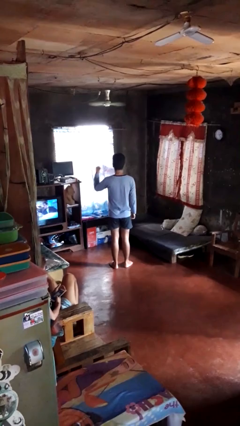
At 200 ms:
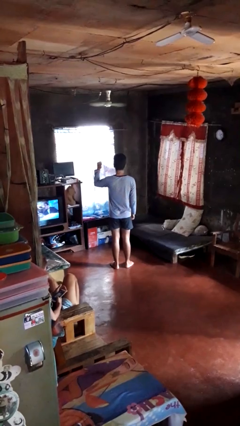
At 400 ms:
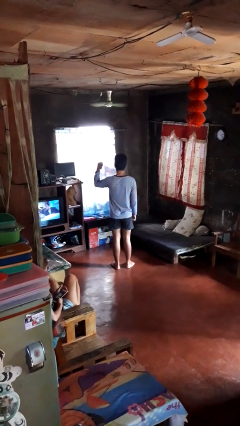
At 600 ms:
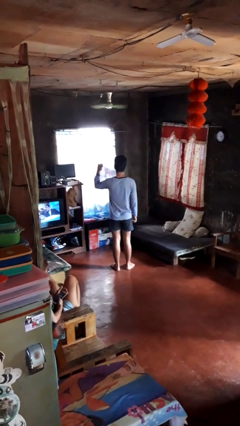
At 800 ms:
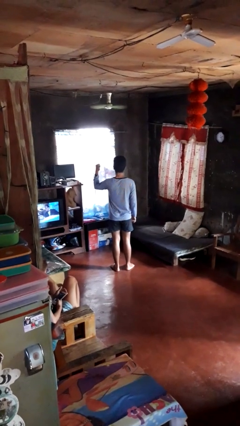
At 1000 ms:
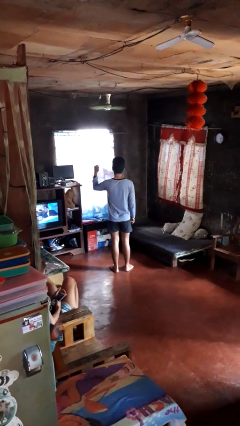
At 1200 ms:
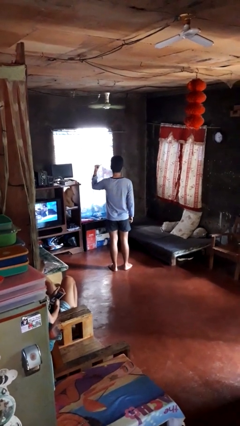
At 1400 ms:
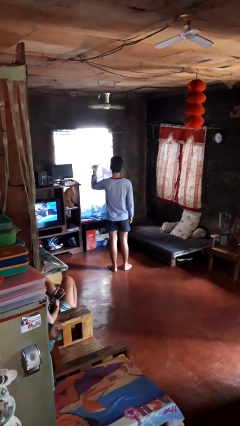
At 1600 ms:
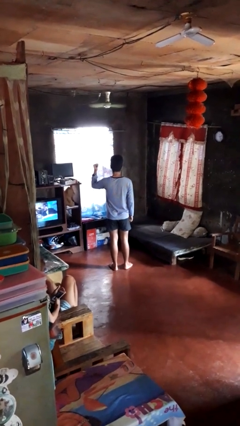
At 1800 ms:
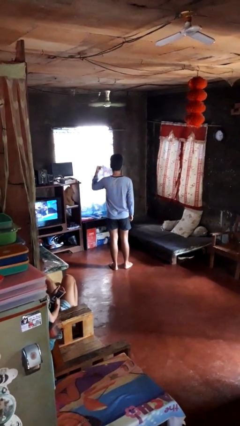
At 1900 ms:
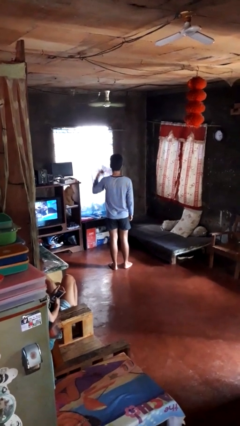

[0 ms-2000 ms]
person gestures hang loose

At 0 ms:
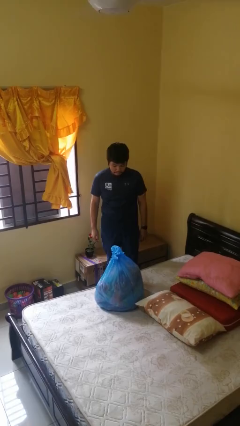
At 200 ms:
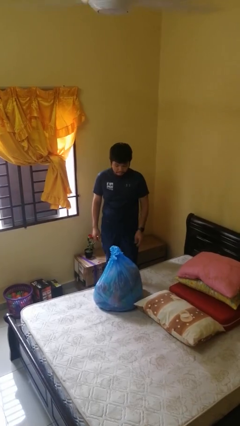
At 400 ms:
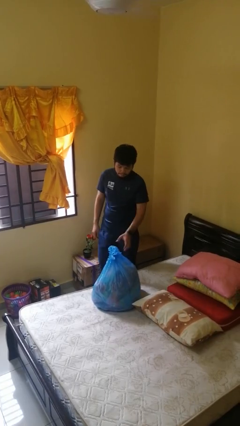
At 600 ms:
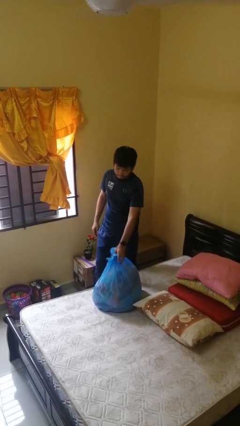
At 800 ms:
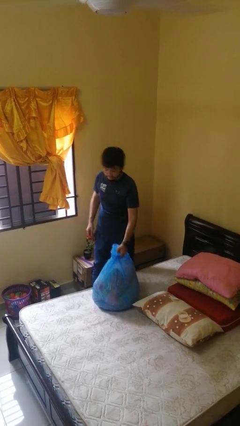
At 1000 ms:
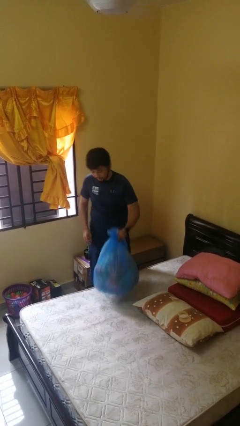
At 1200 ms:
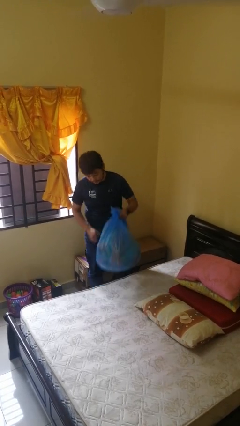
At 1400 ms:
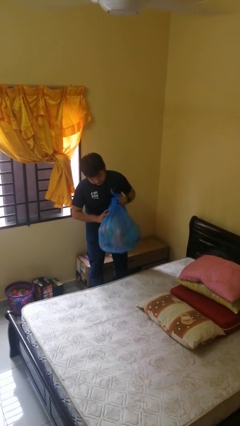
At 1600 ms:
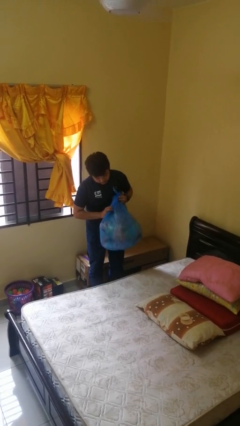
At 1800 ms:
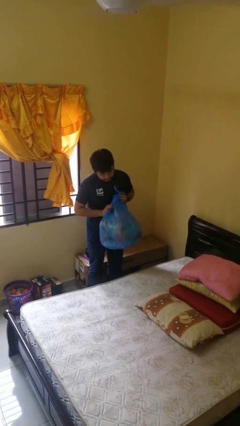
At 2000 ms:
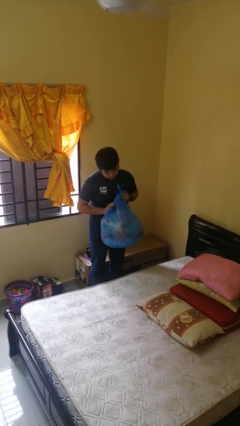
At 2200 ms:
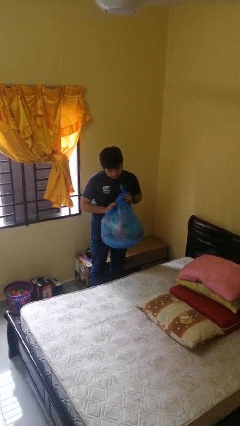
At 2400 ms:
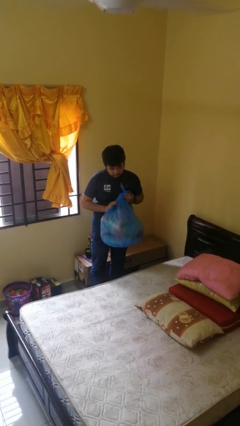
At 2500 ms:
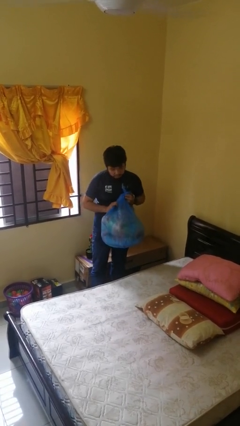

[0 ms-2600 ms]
person picks up object from bed

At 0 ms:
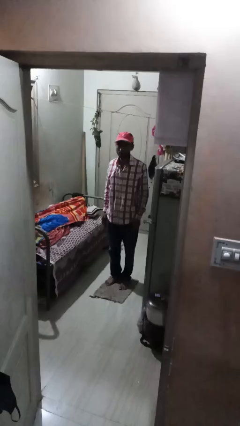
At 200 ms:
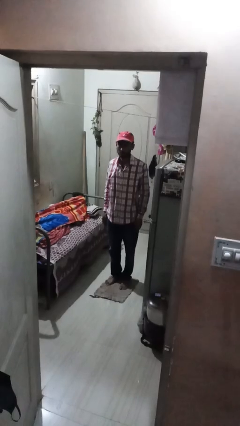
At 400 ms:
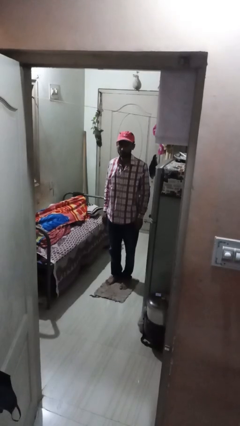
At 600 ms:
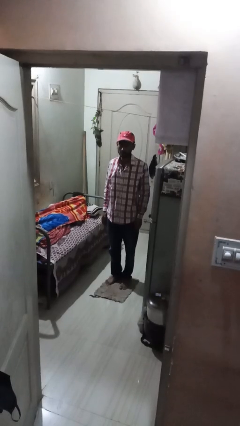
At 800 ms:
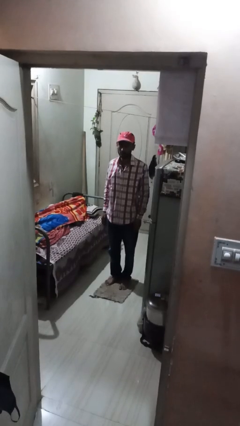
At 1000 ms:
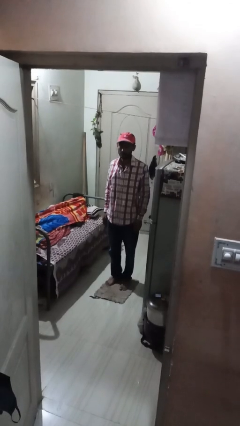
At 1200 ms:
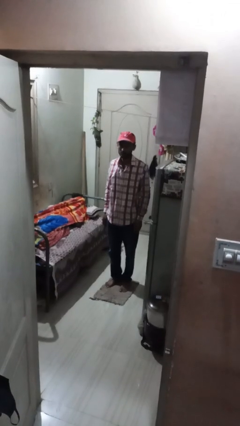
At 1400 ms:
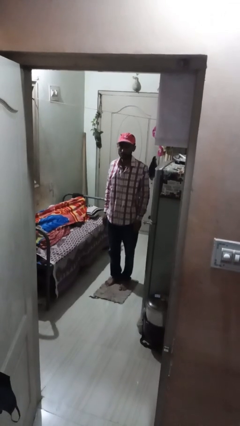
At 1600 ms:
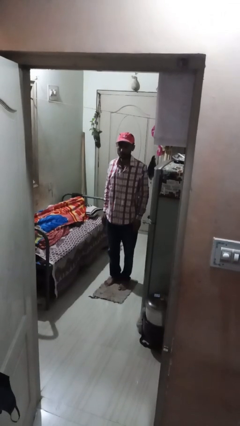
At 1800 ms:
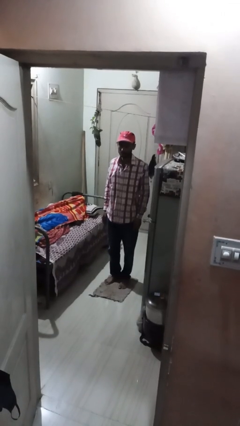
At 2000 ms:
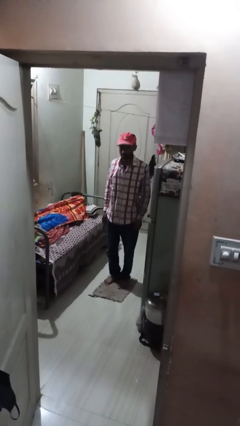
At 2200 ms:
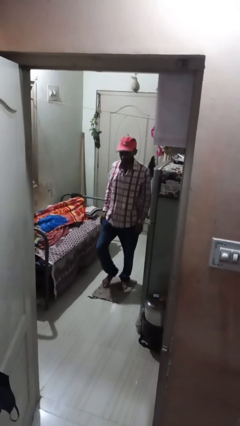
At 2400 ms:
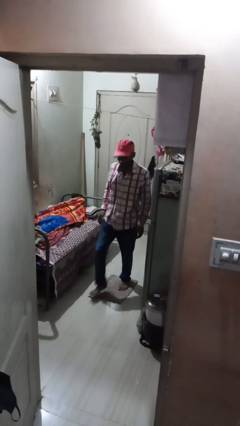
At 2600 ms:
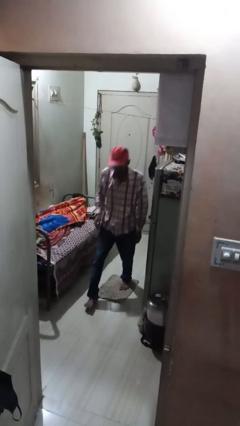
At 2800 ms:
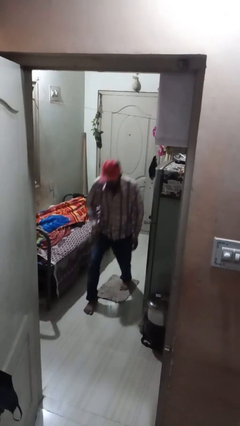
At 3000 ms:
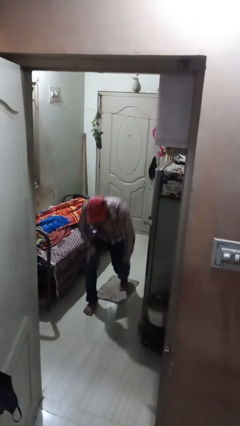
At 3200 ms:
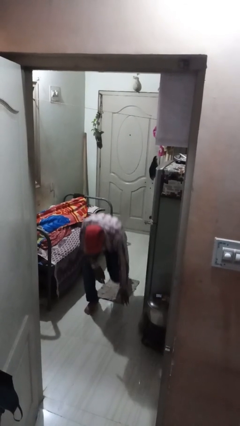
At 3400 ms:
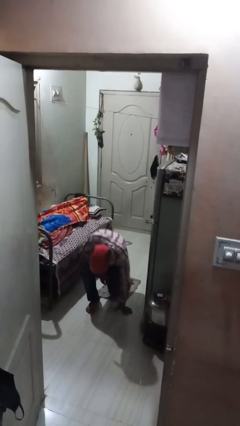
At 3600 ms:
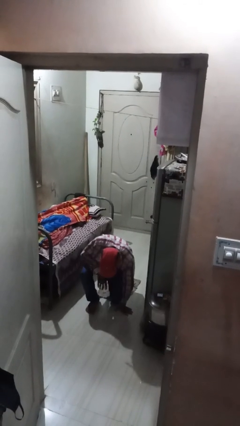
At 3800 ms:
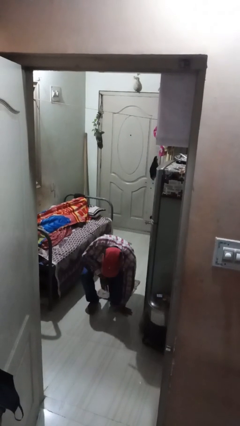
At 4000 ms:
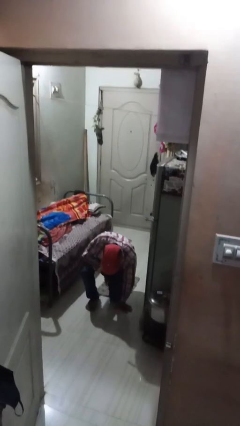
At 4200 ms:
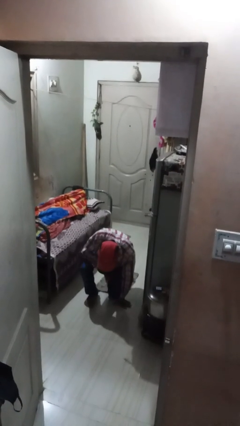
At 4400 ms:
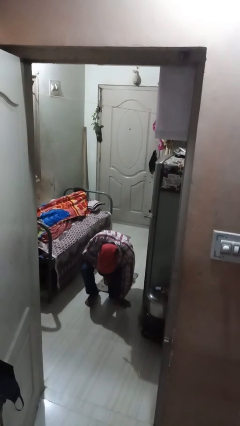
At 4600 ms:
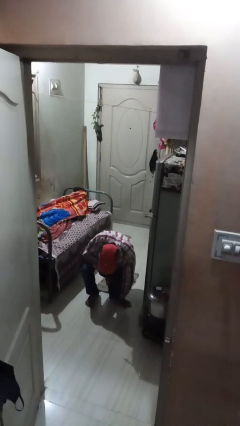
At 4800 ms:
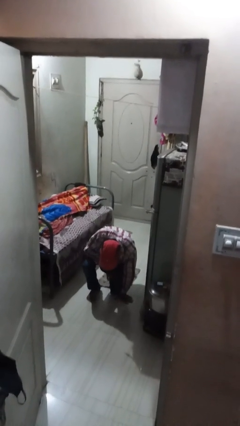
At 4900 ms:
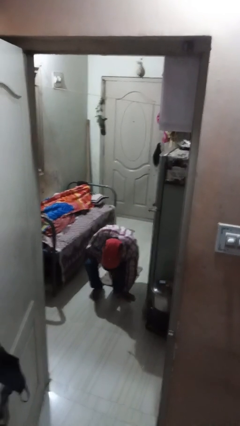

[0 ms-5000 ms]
person kneels

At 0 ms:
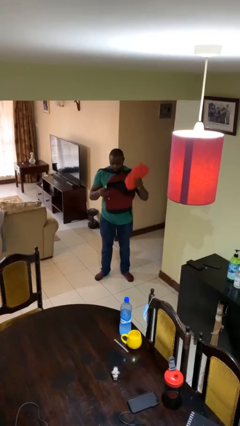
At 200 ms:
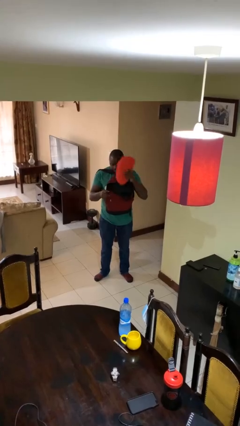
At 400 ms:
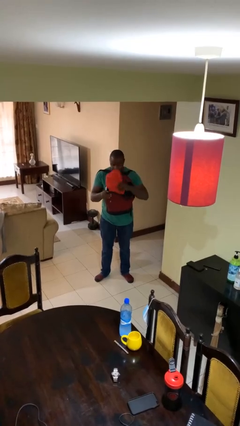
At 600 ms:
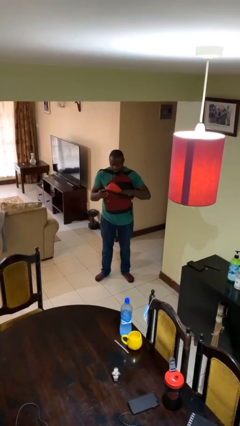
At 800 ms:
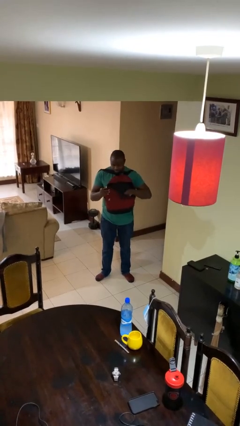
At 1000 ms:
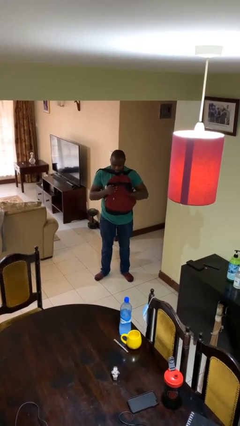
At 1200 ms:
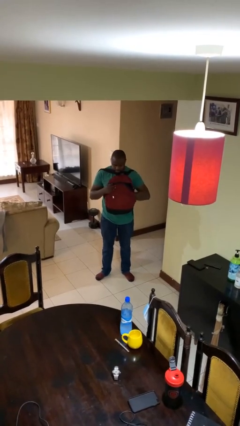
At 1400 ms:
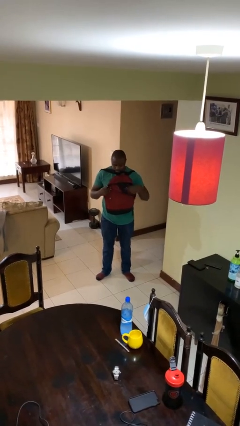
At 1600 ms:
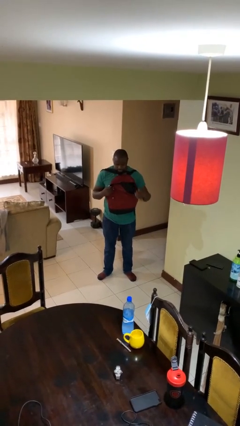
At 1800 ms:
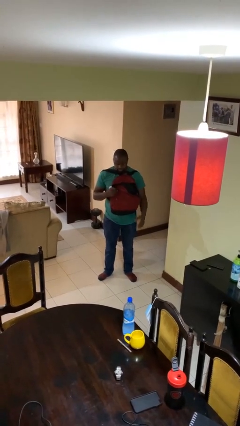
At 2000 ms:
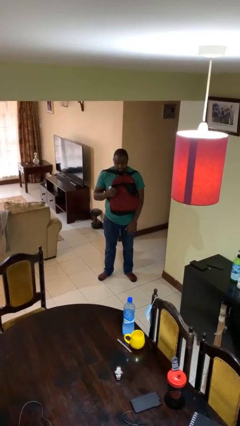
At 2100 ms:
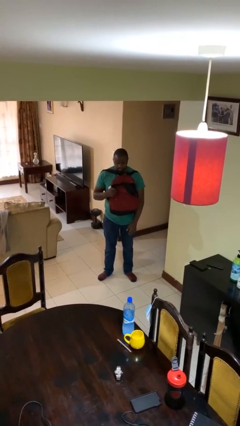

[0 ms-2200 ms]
person puts object into backpack

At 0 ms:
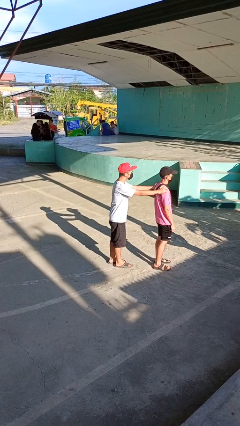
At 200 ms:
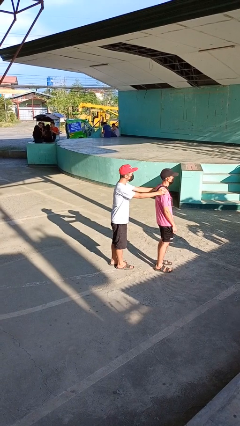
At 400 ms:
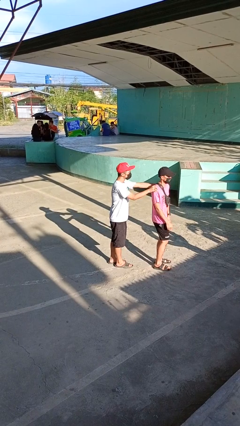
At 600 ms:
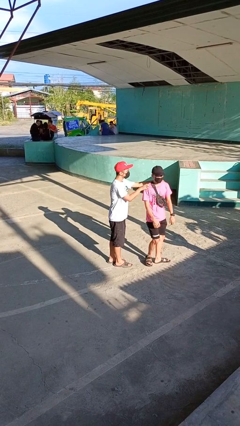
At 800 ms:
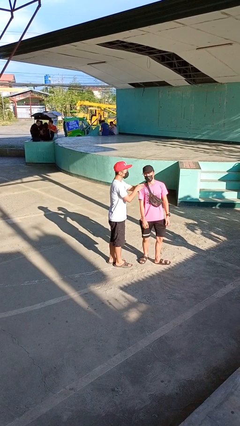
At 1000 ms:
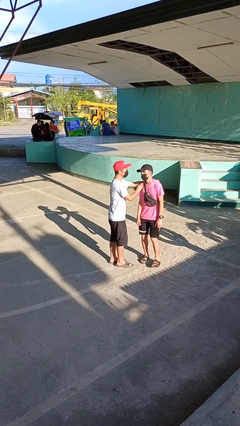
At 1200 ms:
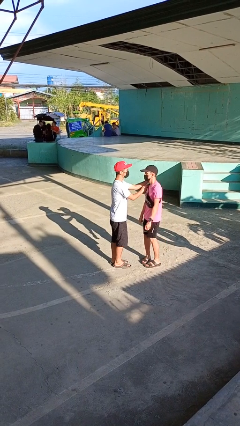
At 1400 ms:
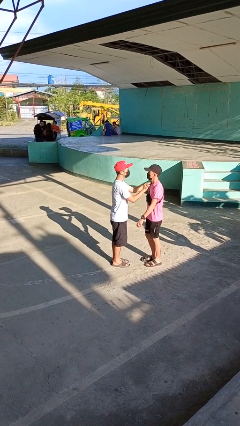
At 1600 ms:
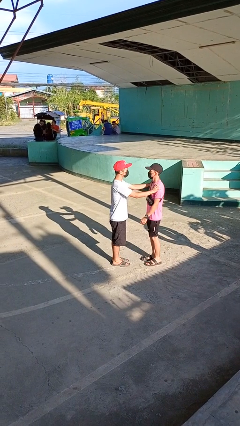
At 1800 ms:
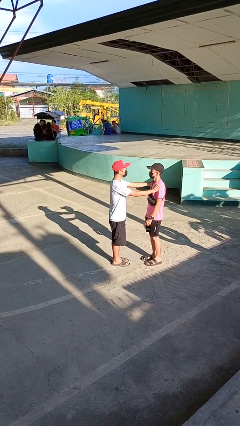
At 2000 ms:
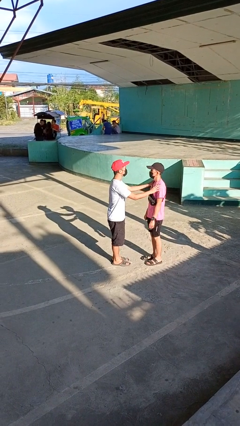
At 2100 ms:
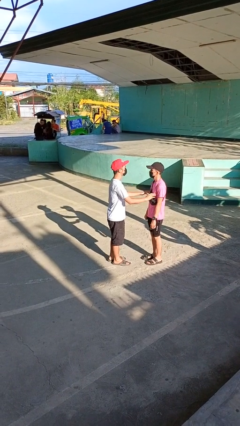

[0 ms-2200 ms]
person spins person around

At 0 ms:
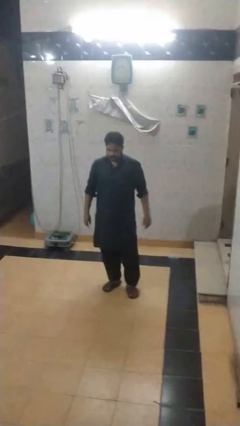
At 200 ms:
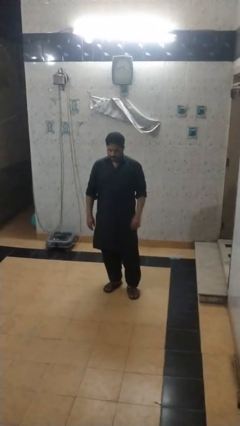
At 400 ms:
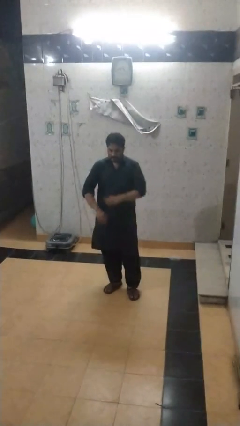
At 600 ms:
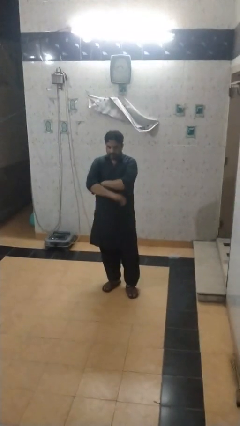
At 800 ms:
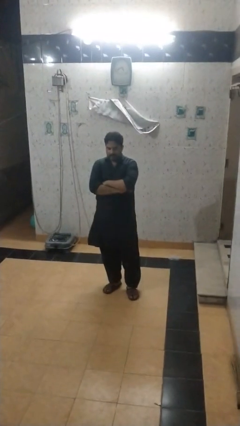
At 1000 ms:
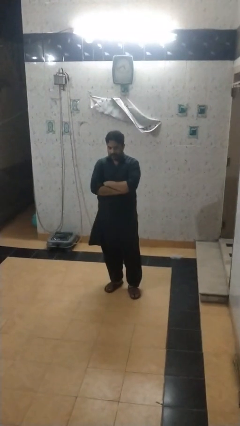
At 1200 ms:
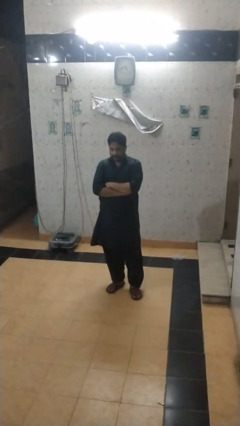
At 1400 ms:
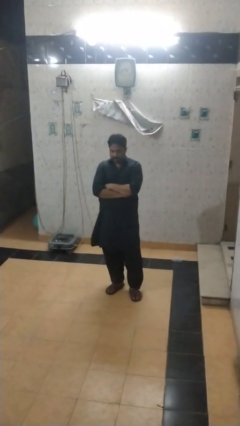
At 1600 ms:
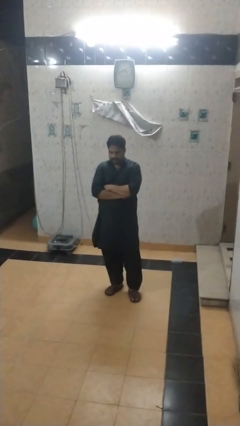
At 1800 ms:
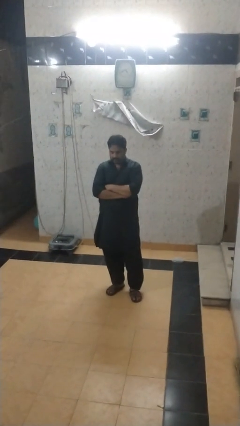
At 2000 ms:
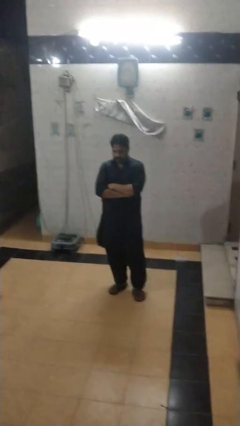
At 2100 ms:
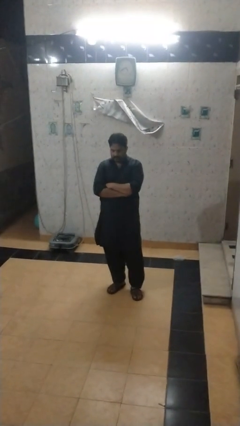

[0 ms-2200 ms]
person crosses arms

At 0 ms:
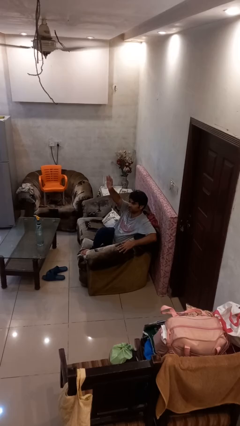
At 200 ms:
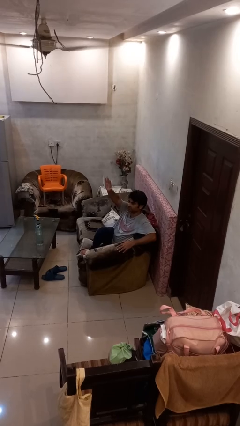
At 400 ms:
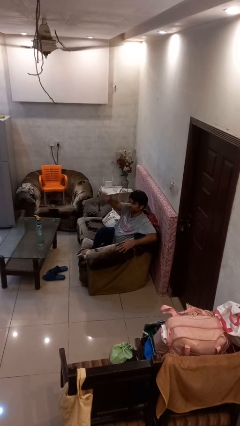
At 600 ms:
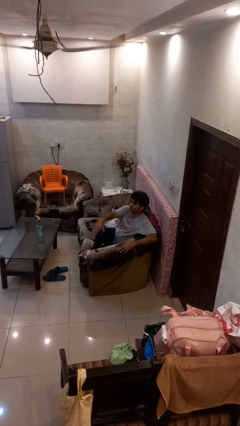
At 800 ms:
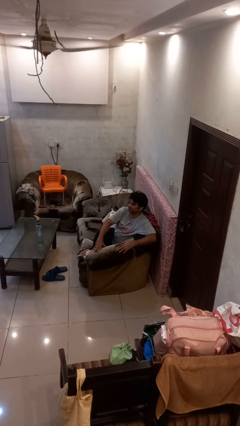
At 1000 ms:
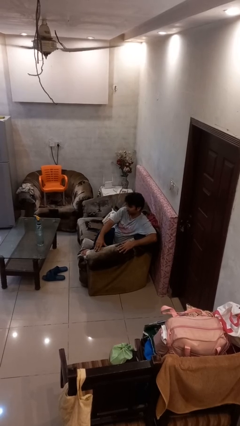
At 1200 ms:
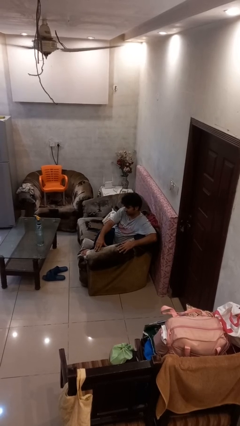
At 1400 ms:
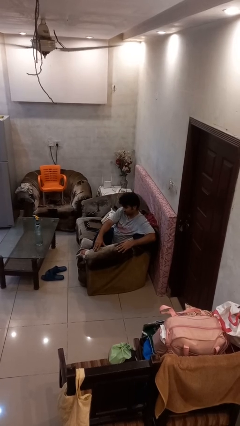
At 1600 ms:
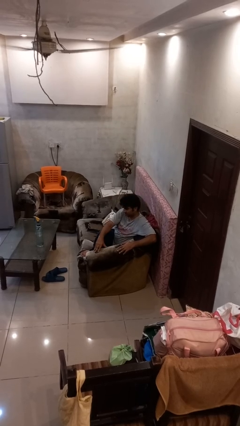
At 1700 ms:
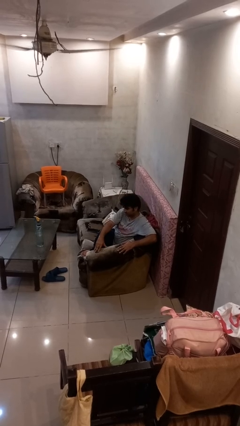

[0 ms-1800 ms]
person gestures lower hand
